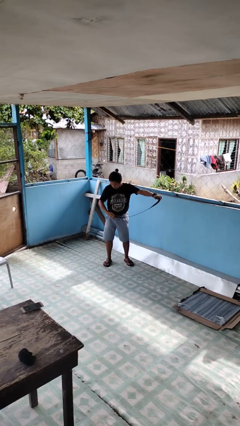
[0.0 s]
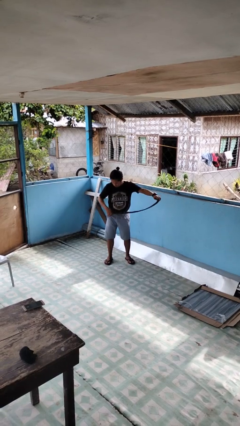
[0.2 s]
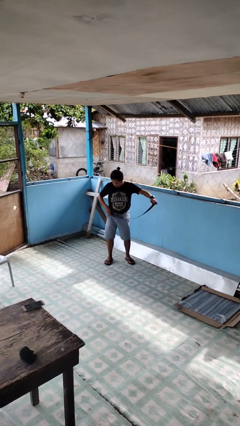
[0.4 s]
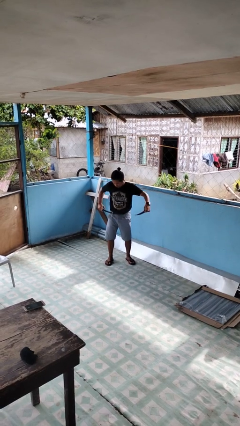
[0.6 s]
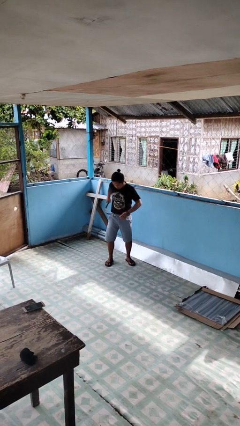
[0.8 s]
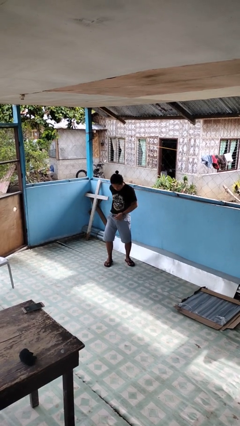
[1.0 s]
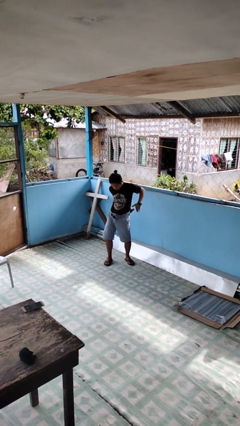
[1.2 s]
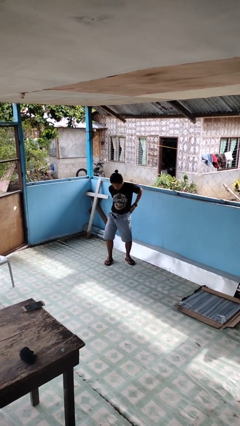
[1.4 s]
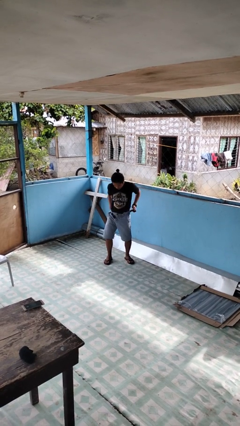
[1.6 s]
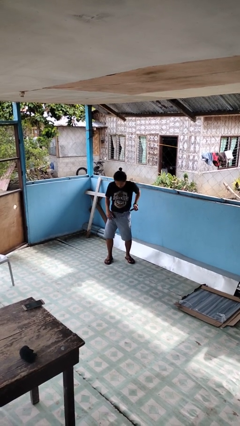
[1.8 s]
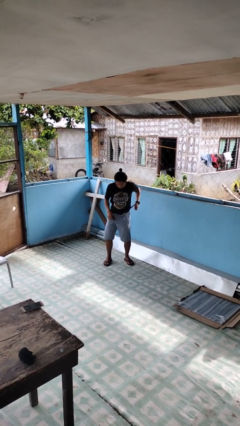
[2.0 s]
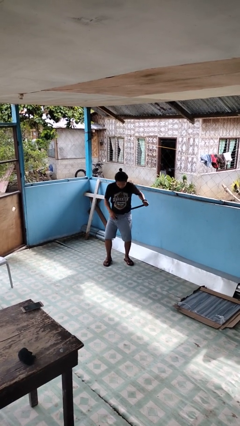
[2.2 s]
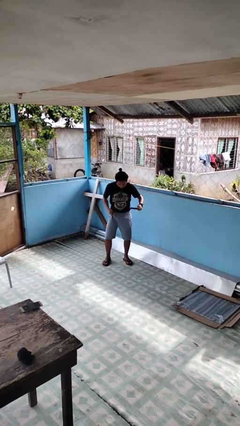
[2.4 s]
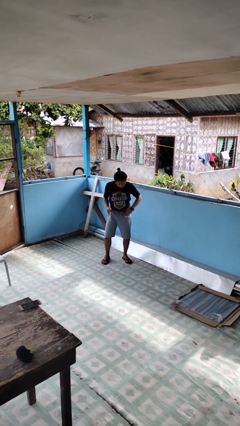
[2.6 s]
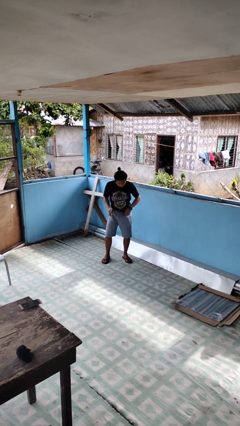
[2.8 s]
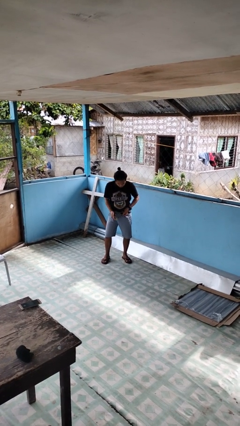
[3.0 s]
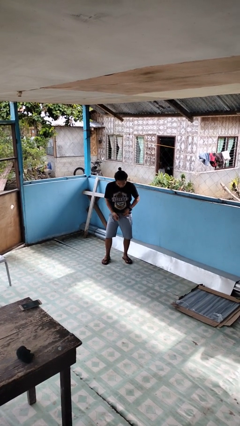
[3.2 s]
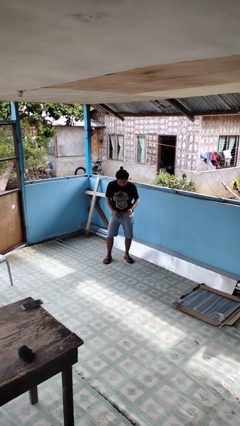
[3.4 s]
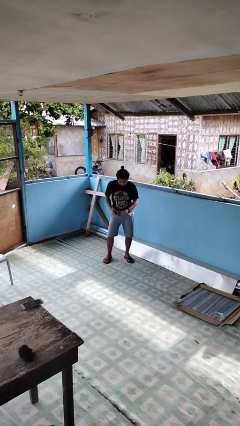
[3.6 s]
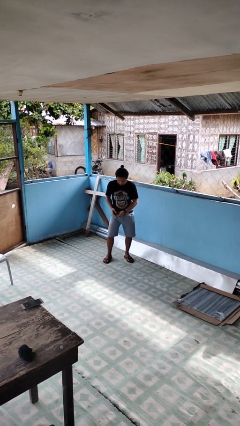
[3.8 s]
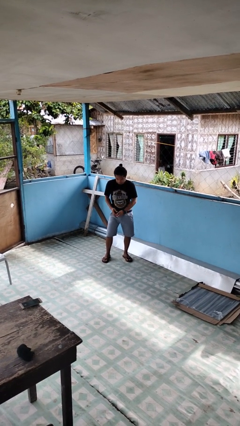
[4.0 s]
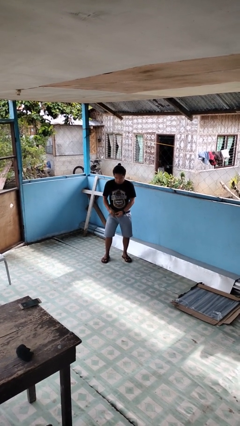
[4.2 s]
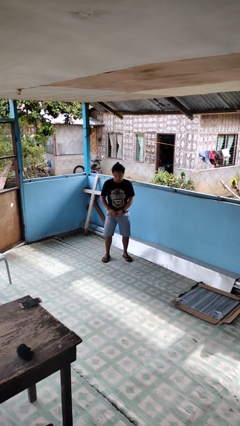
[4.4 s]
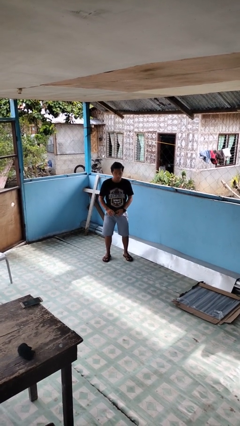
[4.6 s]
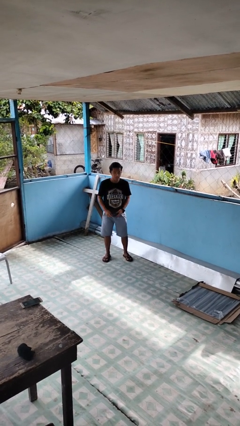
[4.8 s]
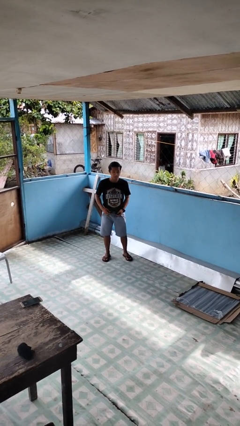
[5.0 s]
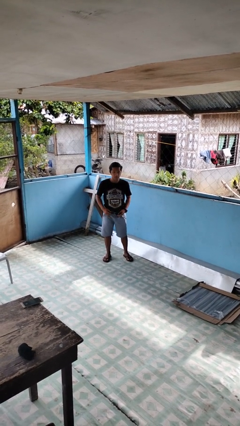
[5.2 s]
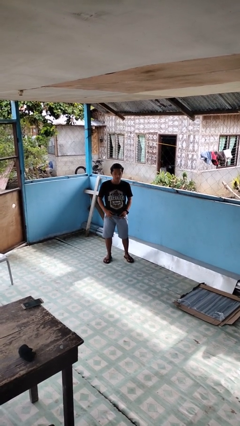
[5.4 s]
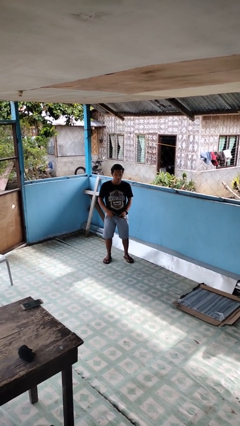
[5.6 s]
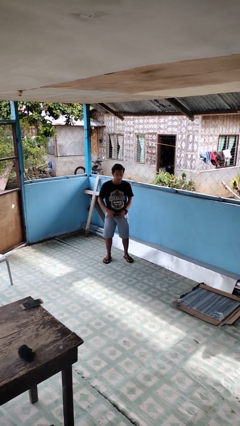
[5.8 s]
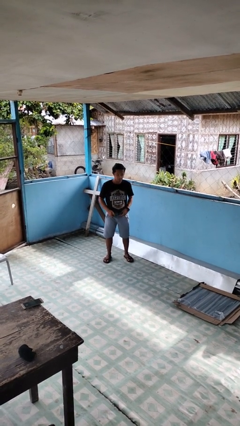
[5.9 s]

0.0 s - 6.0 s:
person puts on belt

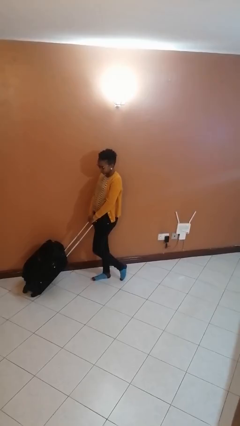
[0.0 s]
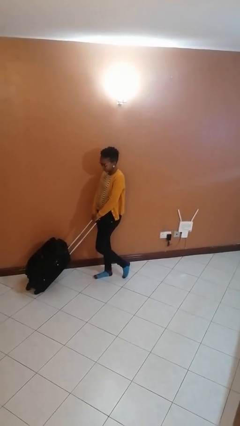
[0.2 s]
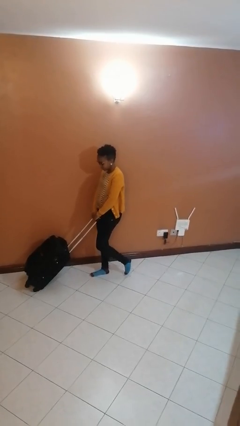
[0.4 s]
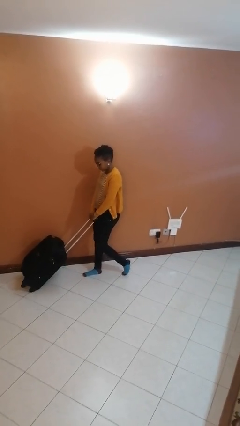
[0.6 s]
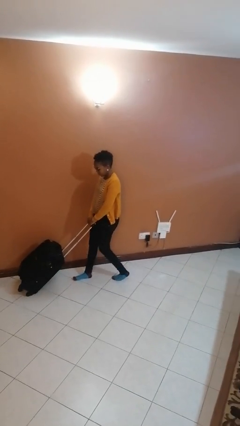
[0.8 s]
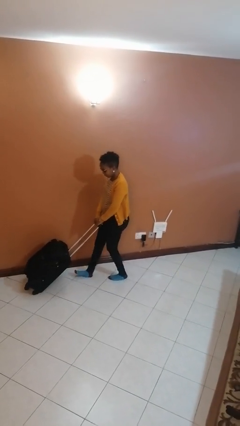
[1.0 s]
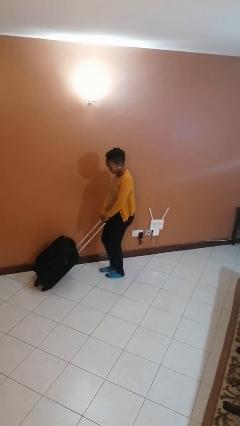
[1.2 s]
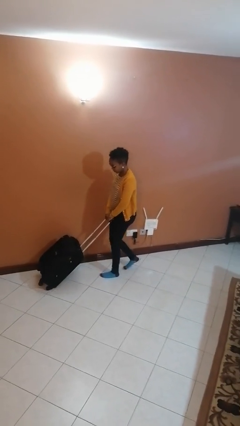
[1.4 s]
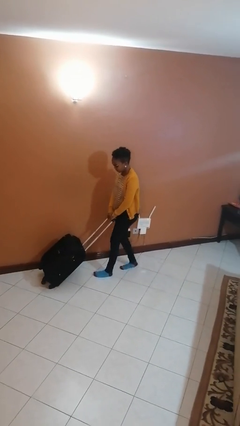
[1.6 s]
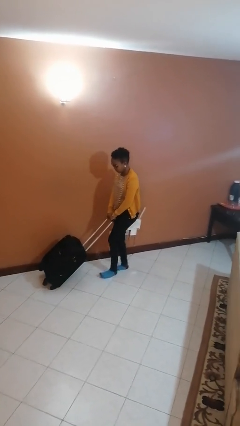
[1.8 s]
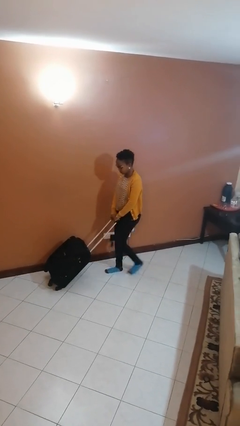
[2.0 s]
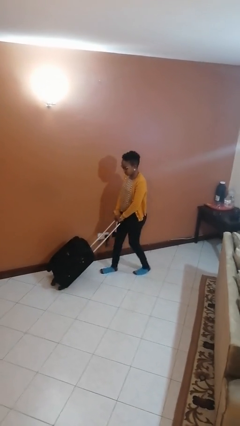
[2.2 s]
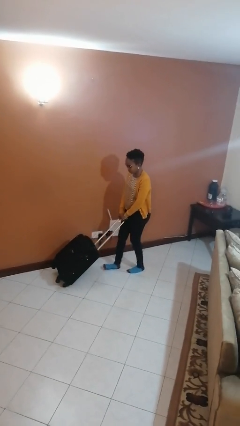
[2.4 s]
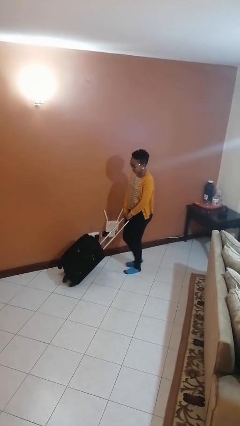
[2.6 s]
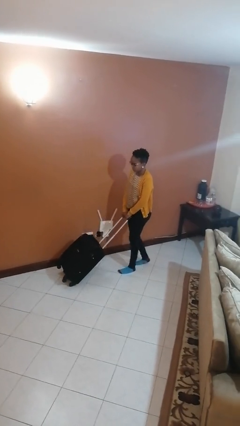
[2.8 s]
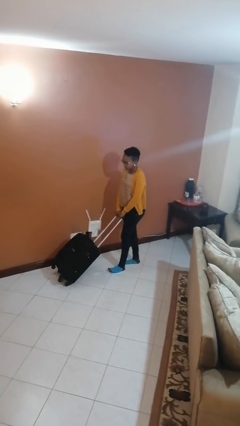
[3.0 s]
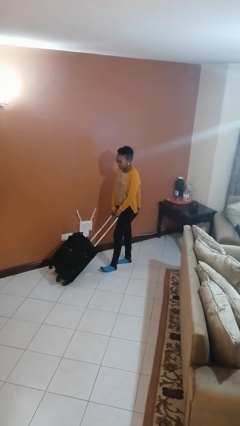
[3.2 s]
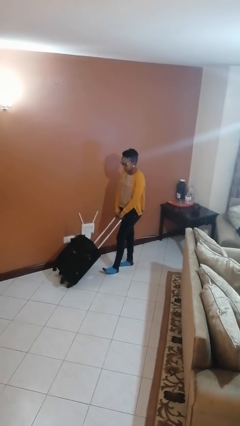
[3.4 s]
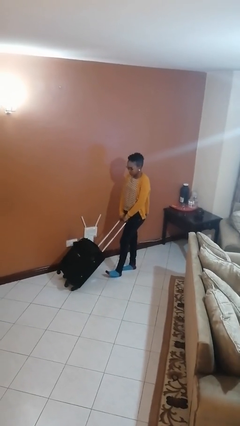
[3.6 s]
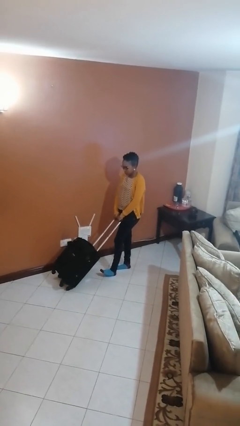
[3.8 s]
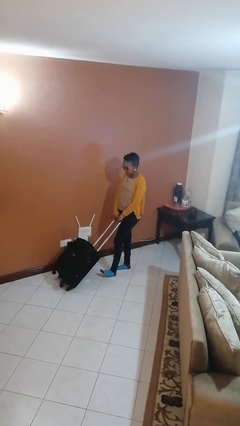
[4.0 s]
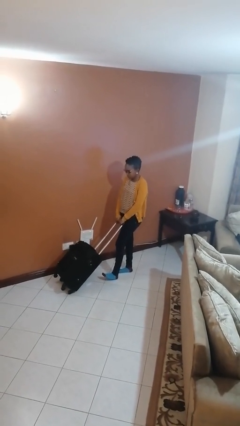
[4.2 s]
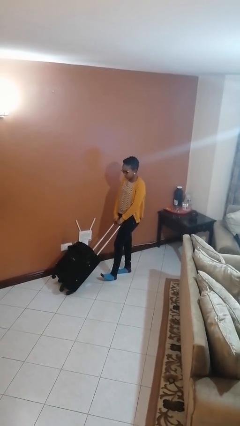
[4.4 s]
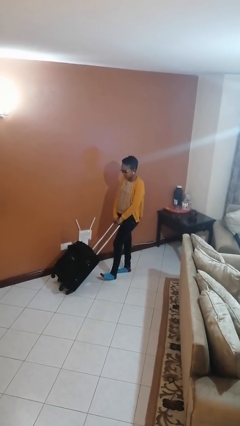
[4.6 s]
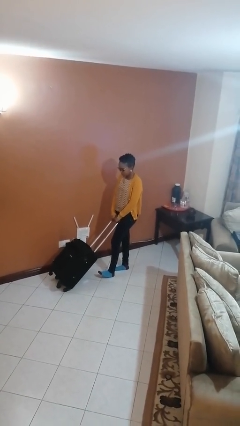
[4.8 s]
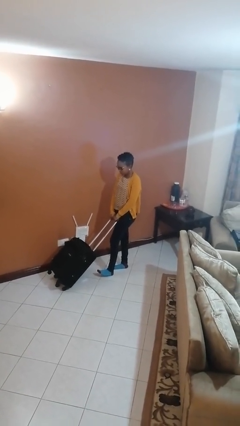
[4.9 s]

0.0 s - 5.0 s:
person pulls wheeled cart

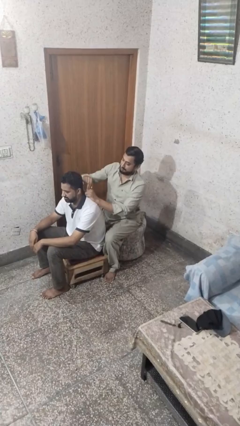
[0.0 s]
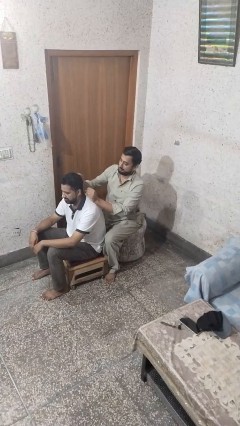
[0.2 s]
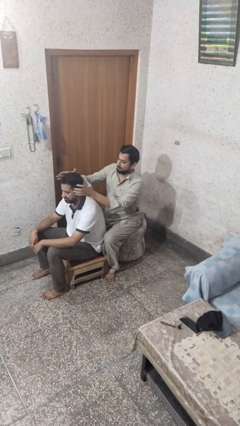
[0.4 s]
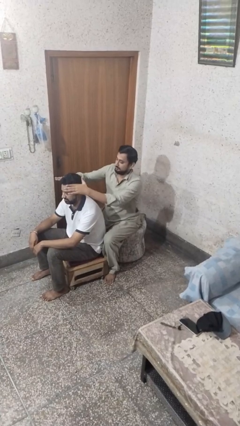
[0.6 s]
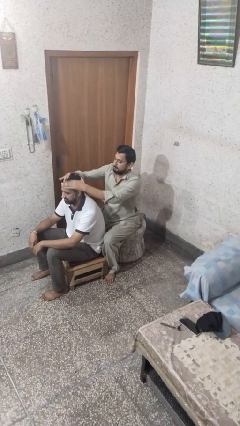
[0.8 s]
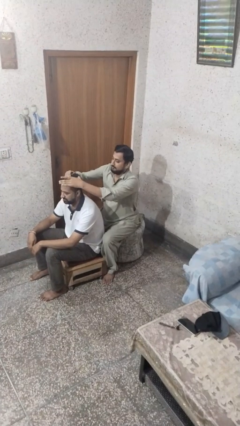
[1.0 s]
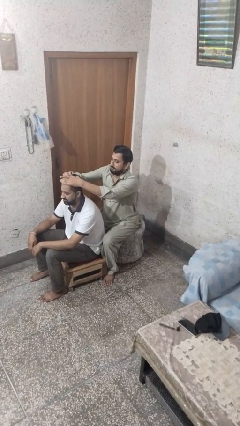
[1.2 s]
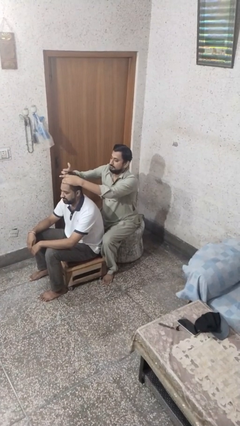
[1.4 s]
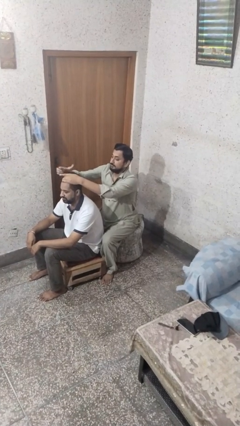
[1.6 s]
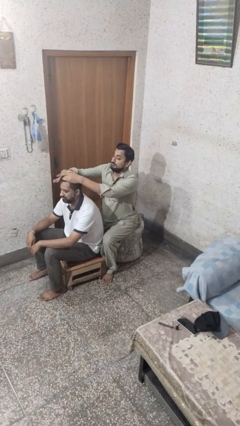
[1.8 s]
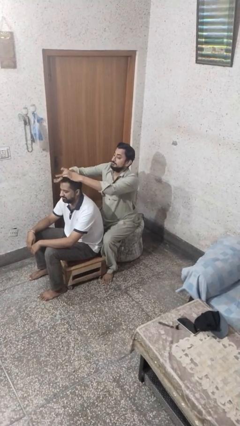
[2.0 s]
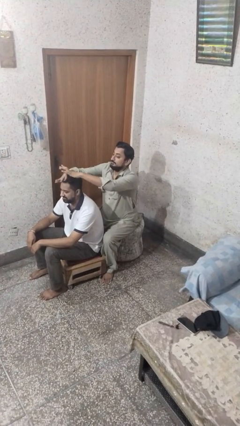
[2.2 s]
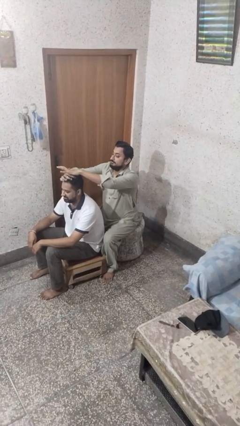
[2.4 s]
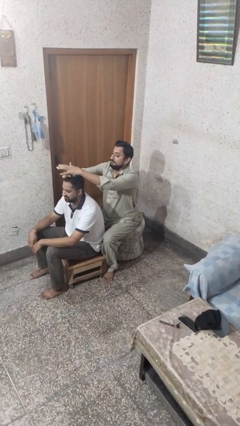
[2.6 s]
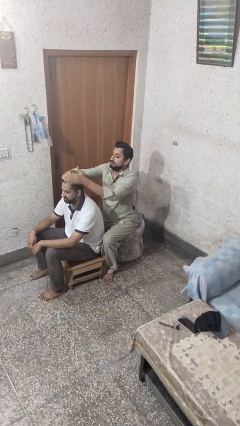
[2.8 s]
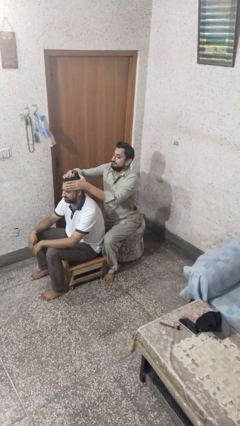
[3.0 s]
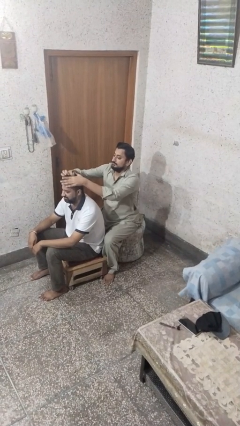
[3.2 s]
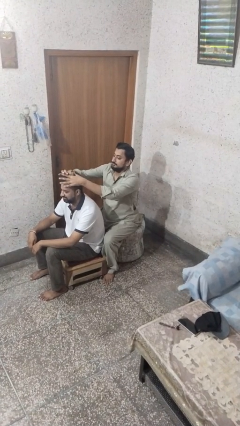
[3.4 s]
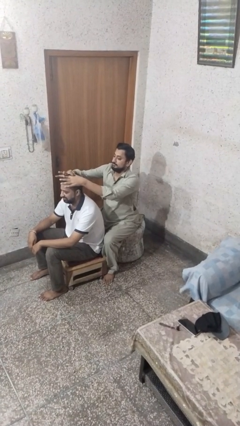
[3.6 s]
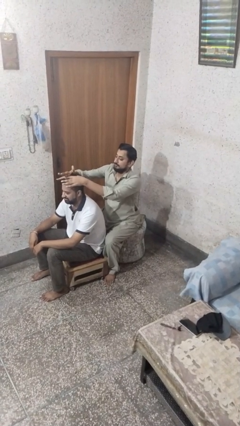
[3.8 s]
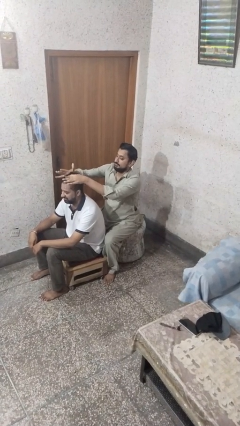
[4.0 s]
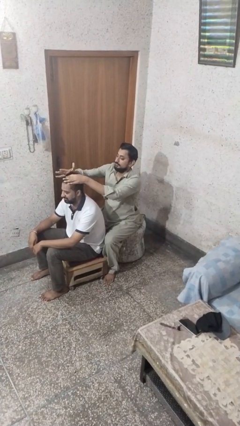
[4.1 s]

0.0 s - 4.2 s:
person braids hair of person

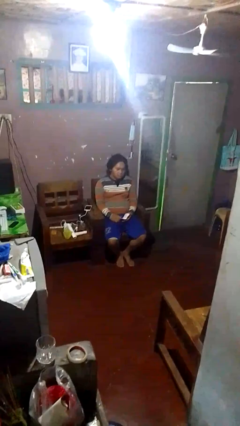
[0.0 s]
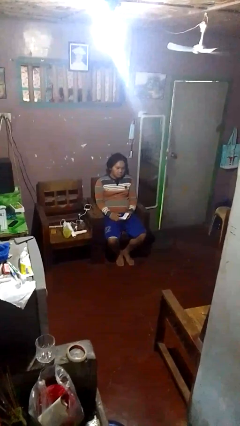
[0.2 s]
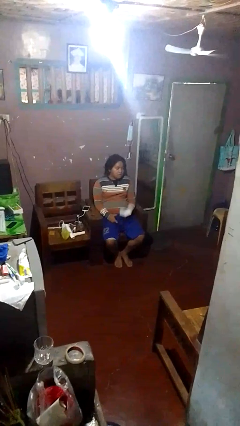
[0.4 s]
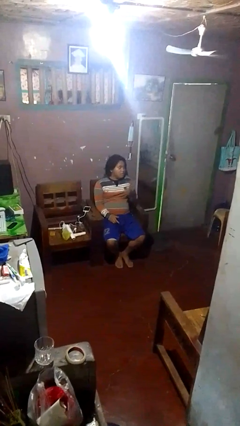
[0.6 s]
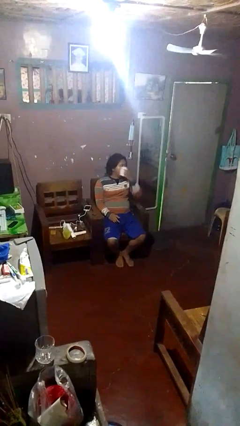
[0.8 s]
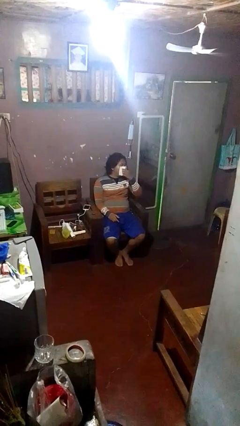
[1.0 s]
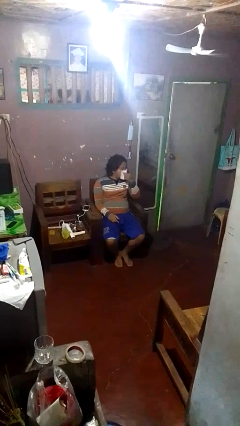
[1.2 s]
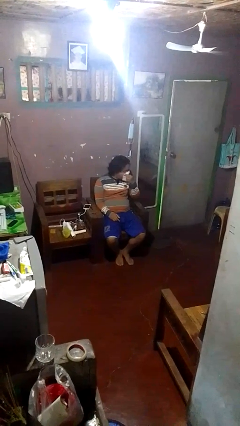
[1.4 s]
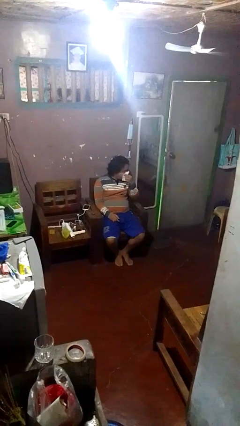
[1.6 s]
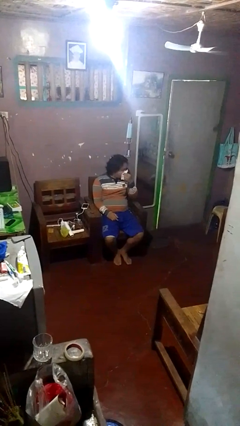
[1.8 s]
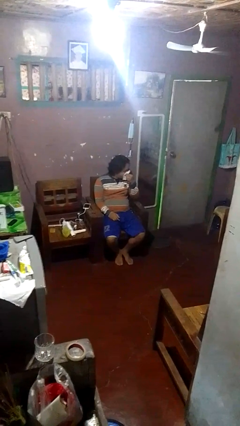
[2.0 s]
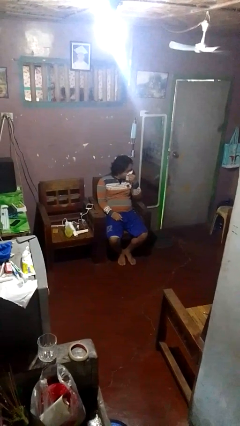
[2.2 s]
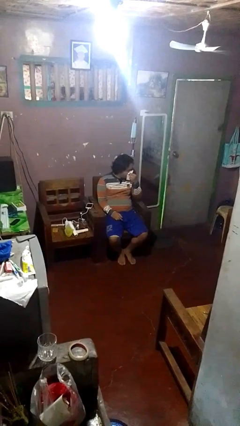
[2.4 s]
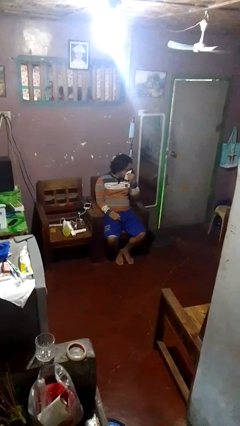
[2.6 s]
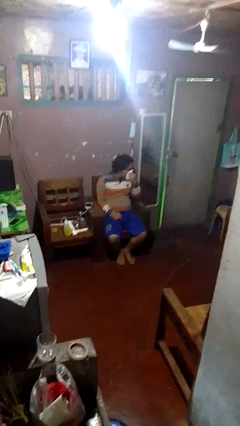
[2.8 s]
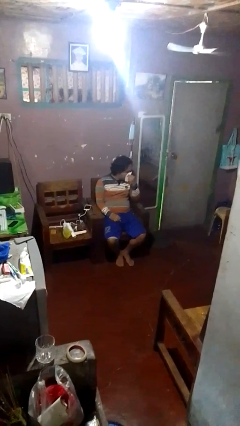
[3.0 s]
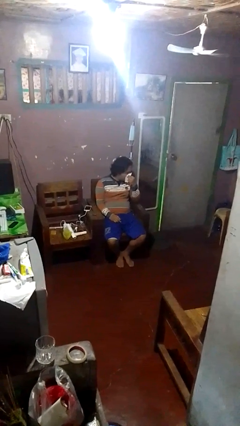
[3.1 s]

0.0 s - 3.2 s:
person blows nose
